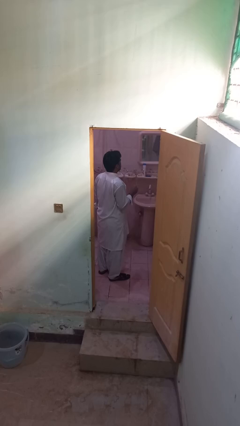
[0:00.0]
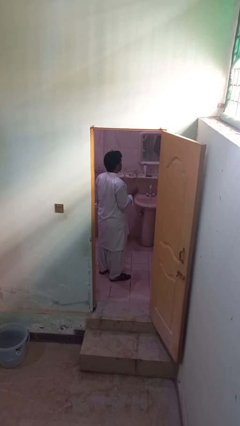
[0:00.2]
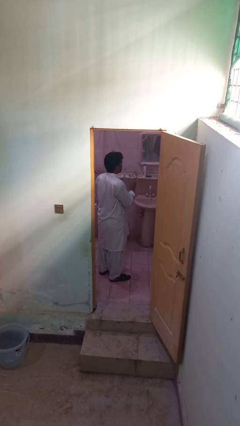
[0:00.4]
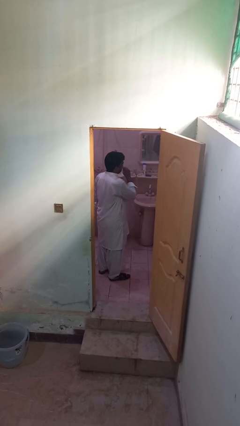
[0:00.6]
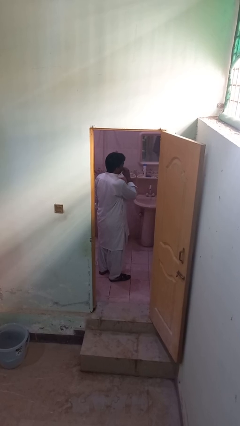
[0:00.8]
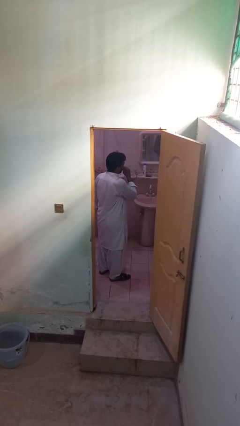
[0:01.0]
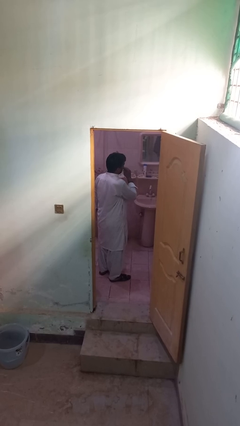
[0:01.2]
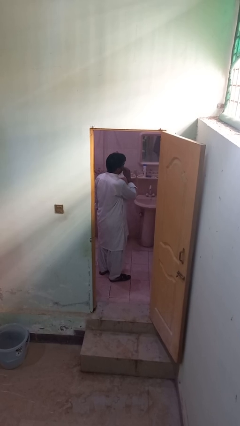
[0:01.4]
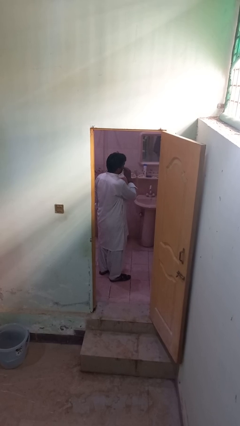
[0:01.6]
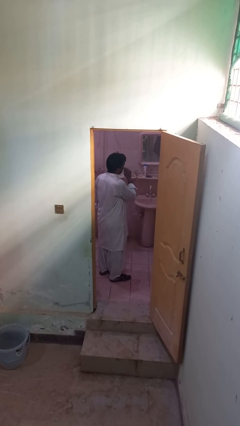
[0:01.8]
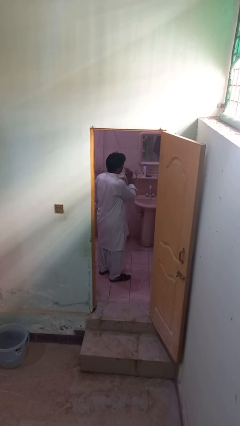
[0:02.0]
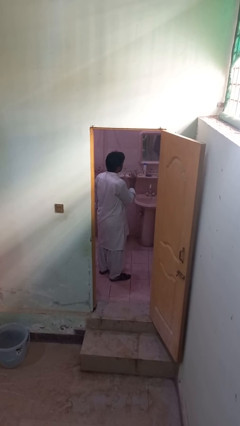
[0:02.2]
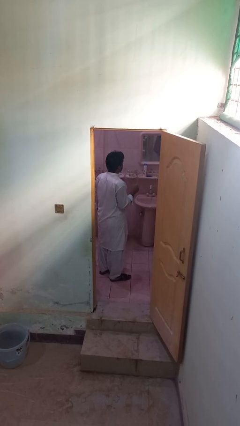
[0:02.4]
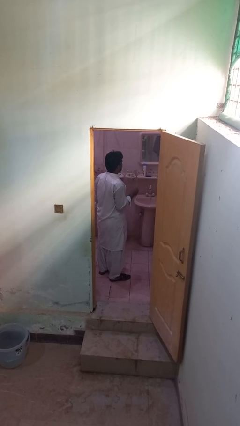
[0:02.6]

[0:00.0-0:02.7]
person flosses

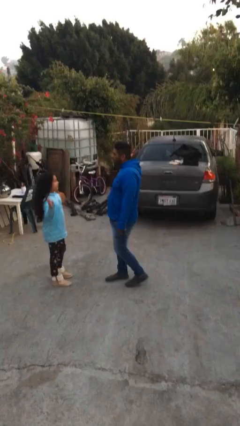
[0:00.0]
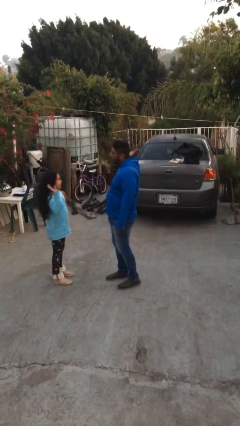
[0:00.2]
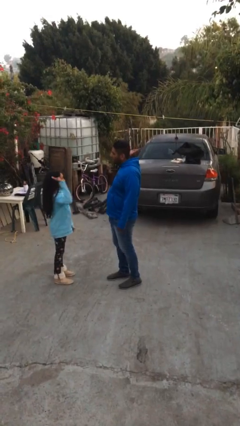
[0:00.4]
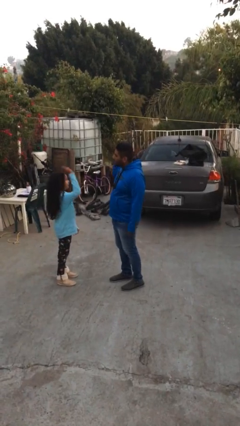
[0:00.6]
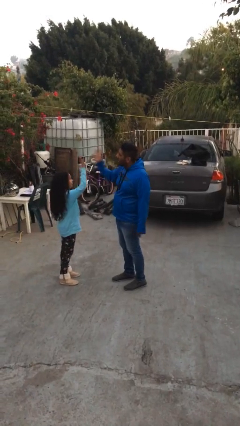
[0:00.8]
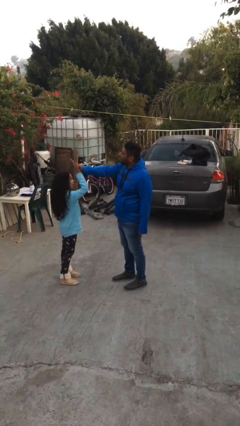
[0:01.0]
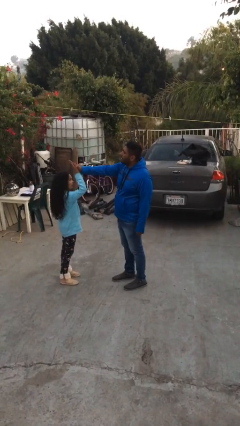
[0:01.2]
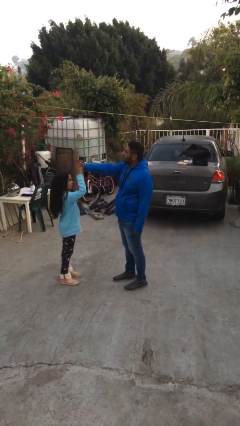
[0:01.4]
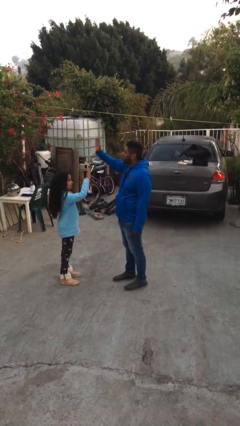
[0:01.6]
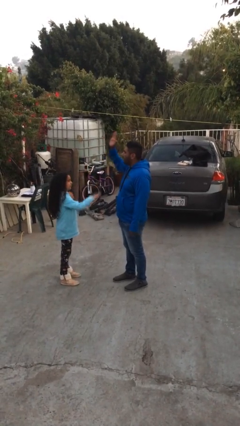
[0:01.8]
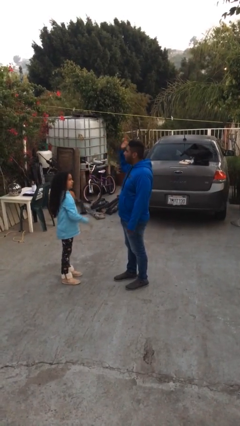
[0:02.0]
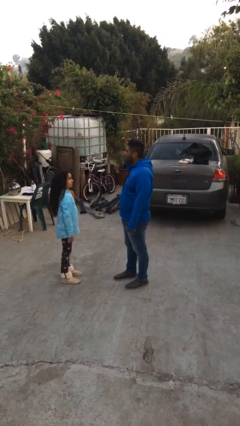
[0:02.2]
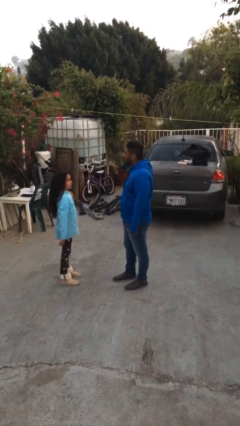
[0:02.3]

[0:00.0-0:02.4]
person highfives hand

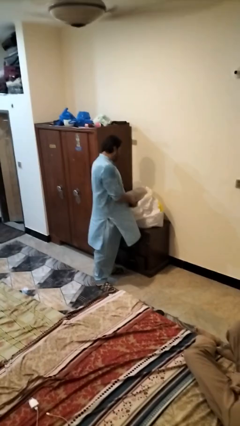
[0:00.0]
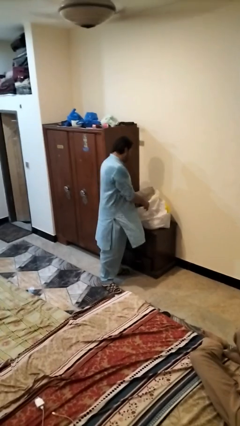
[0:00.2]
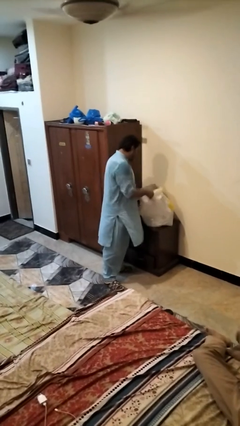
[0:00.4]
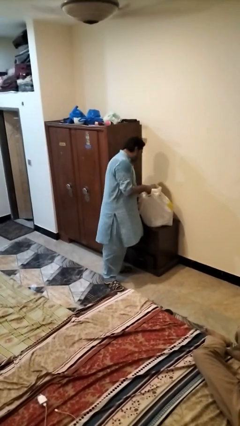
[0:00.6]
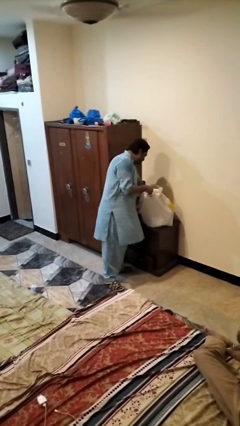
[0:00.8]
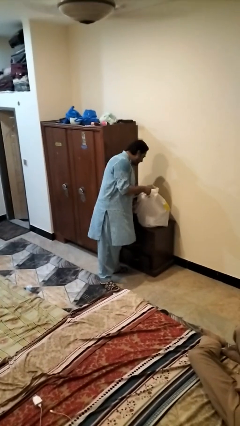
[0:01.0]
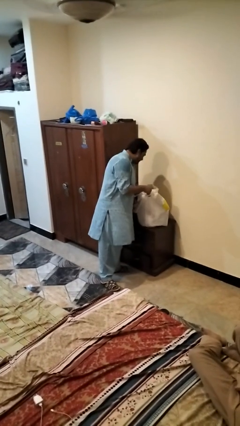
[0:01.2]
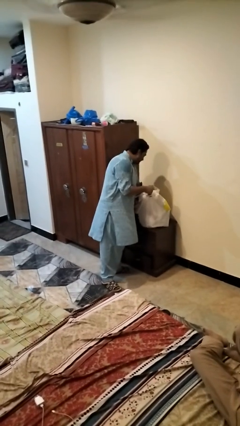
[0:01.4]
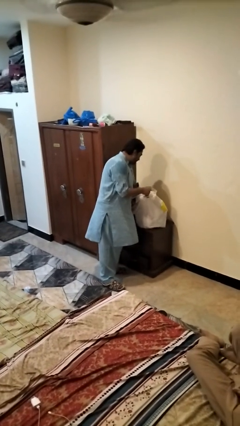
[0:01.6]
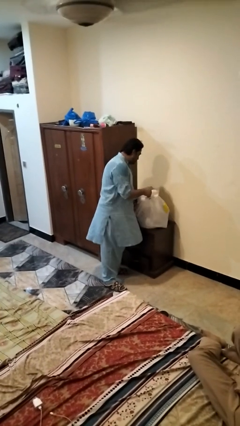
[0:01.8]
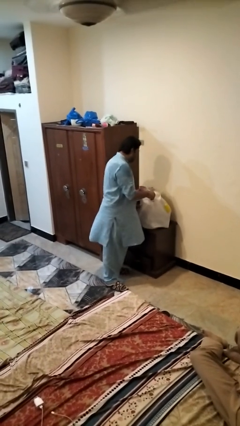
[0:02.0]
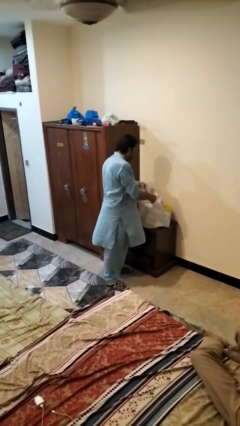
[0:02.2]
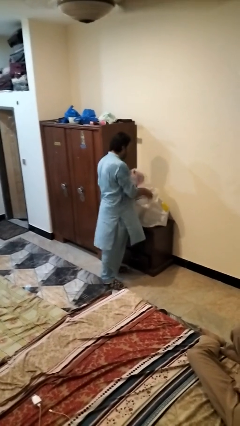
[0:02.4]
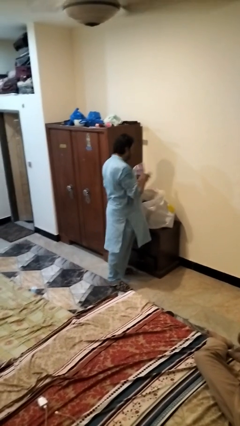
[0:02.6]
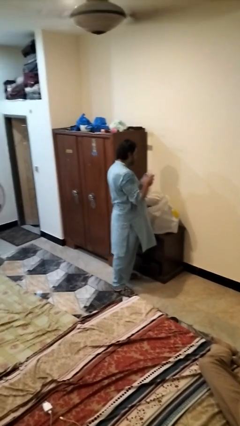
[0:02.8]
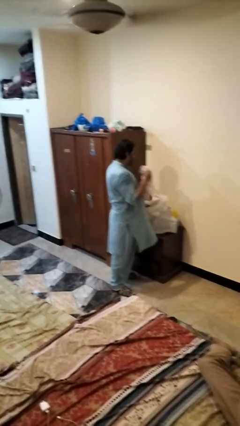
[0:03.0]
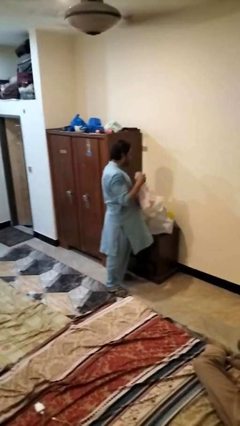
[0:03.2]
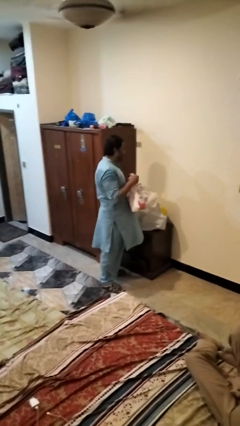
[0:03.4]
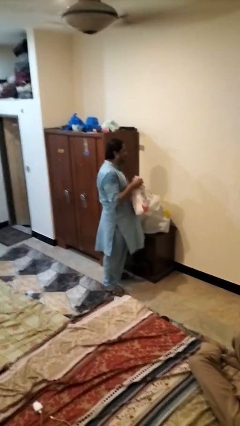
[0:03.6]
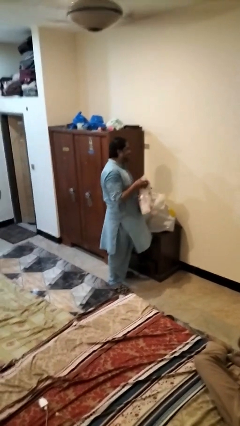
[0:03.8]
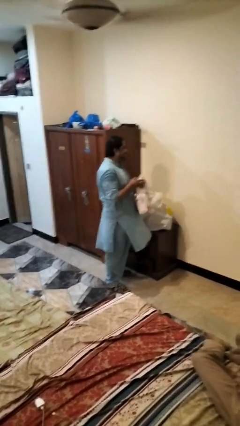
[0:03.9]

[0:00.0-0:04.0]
person takes object from bag

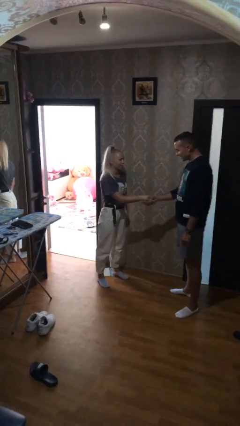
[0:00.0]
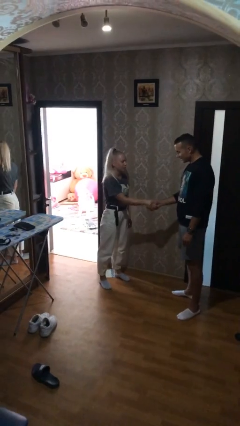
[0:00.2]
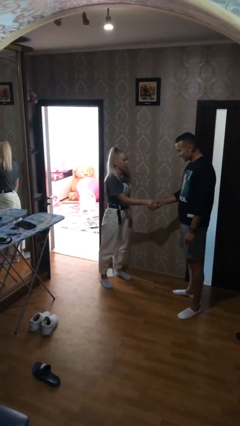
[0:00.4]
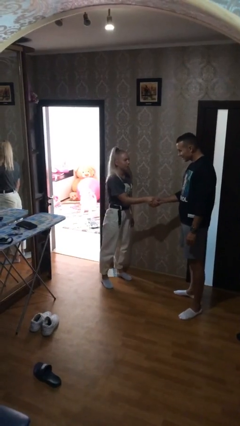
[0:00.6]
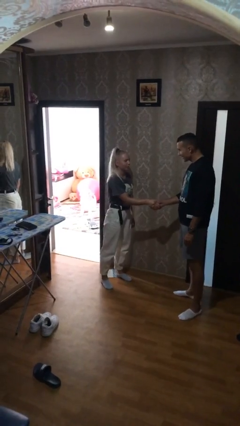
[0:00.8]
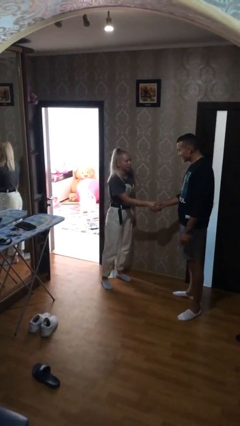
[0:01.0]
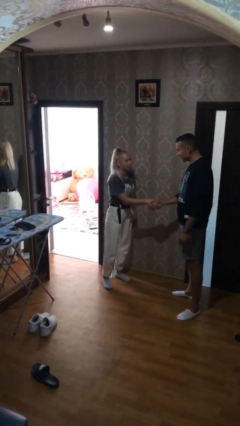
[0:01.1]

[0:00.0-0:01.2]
person shakes hand

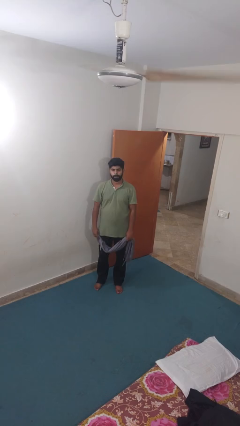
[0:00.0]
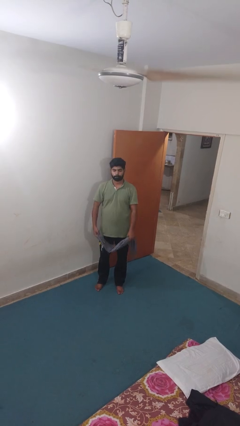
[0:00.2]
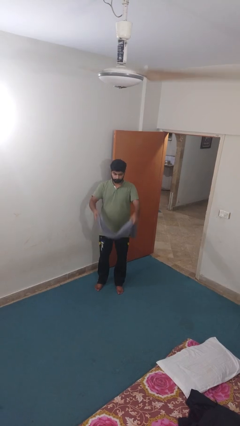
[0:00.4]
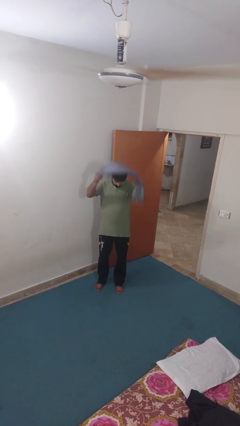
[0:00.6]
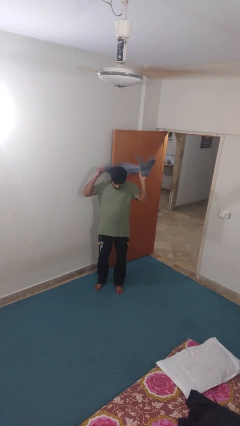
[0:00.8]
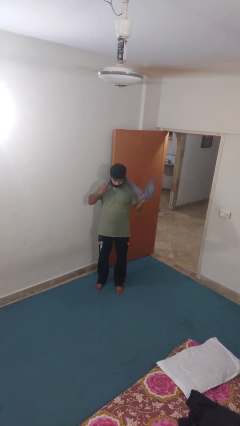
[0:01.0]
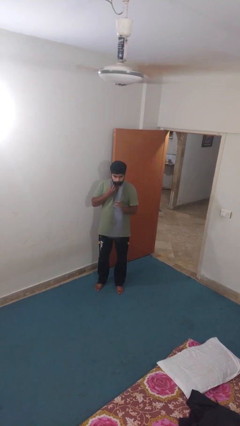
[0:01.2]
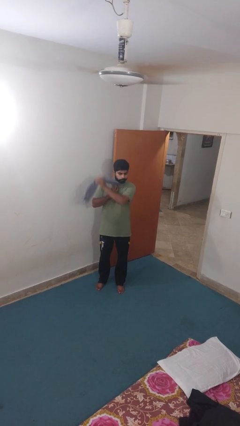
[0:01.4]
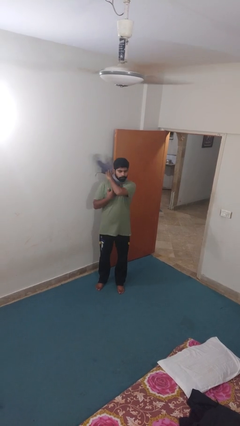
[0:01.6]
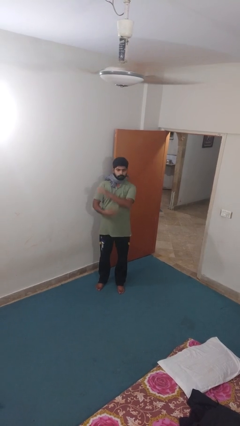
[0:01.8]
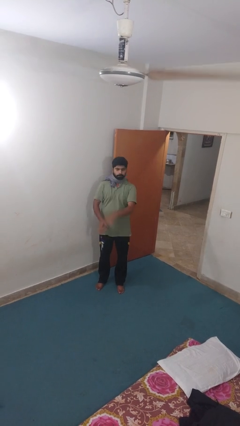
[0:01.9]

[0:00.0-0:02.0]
person puts on scarf

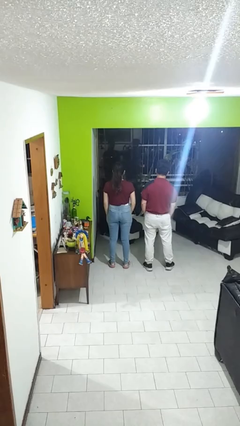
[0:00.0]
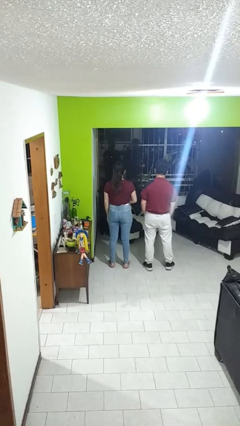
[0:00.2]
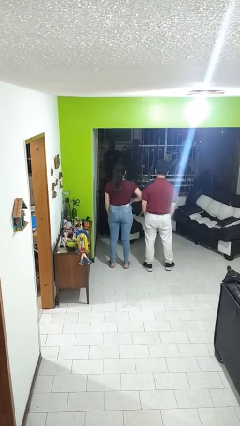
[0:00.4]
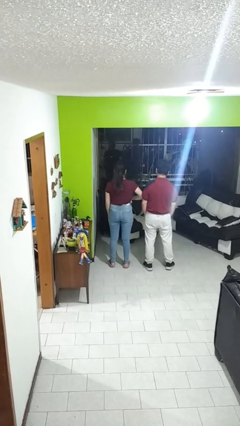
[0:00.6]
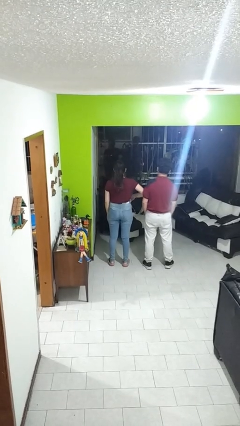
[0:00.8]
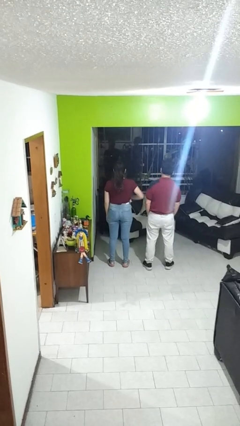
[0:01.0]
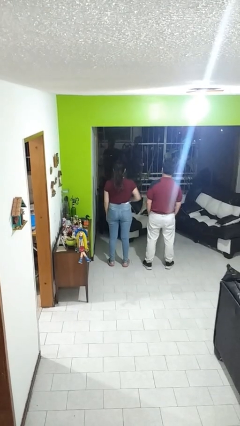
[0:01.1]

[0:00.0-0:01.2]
person nudges person with elbow

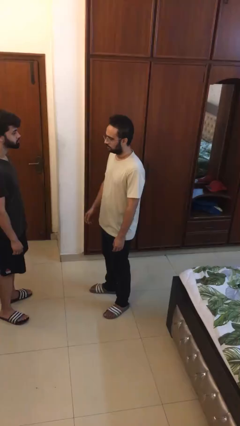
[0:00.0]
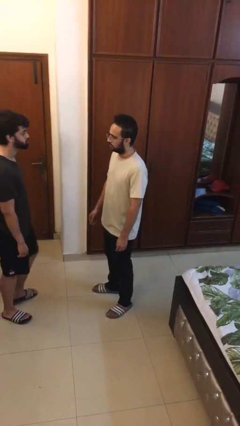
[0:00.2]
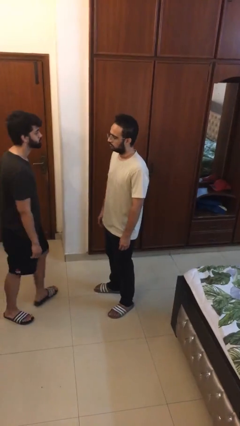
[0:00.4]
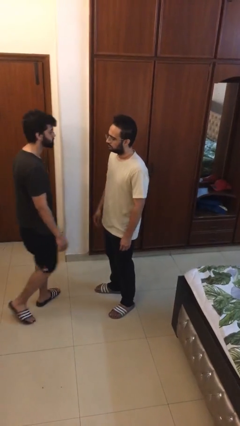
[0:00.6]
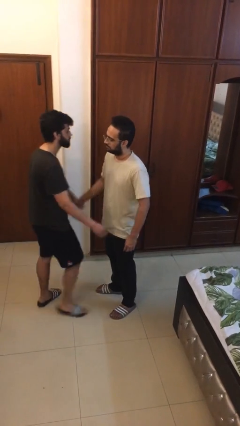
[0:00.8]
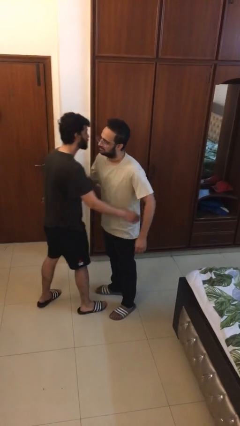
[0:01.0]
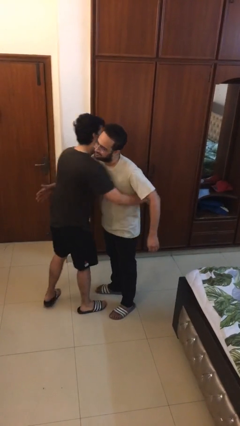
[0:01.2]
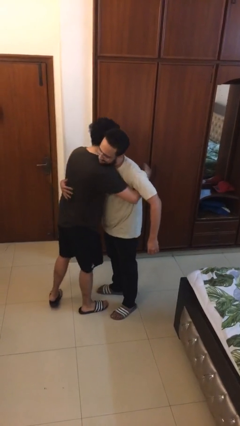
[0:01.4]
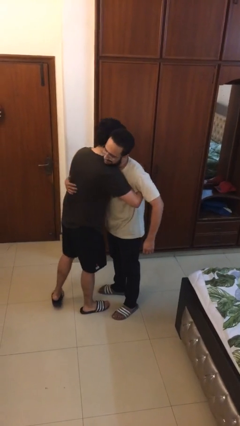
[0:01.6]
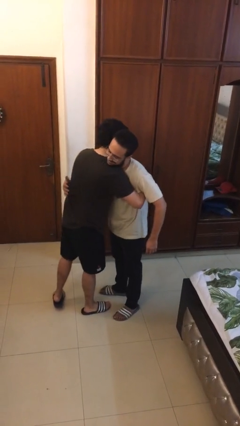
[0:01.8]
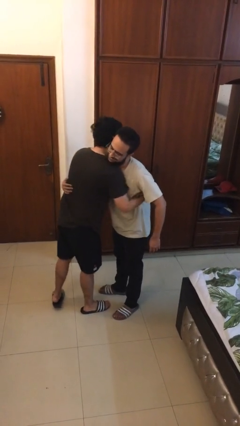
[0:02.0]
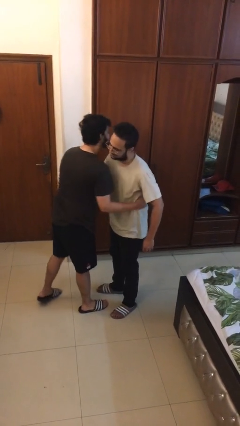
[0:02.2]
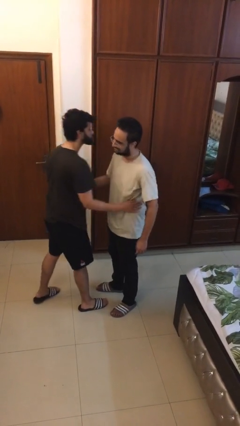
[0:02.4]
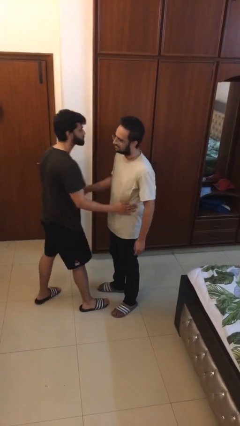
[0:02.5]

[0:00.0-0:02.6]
person embraces person

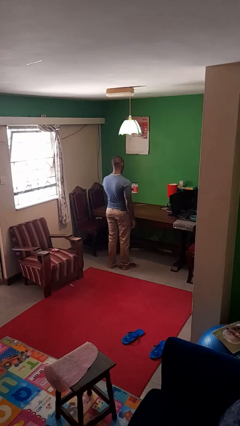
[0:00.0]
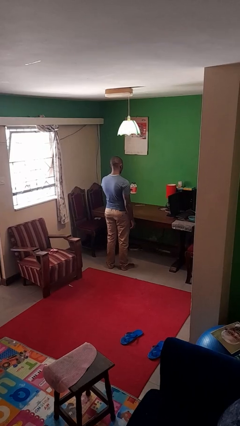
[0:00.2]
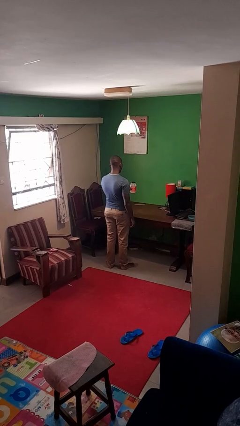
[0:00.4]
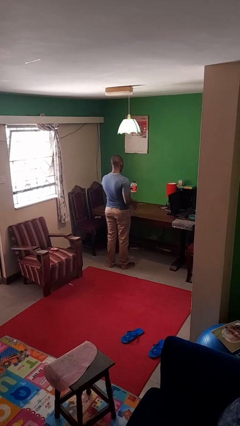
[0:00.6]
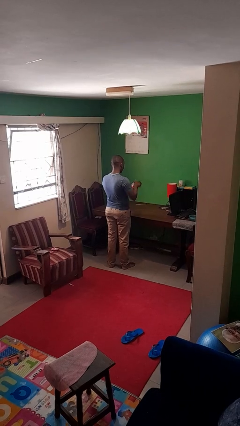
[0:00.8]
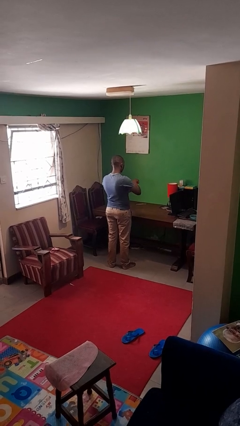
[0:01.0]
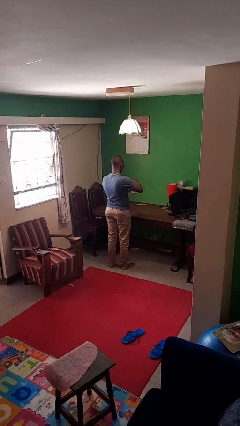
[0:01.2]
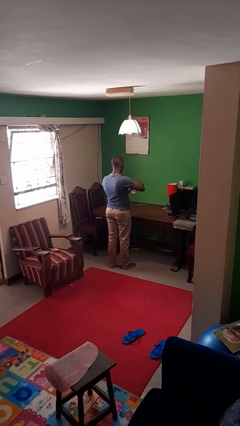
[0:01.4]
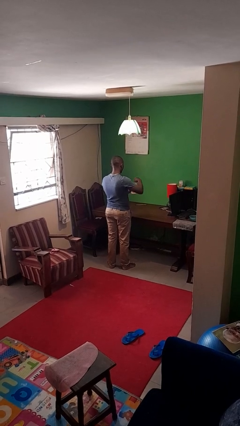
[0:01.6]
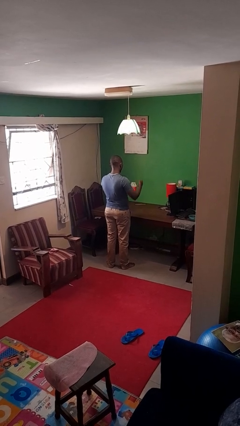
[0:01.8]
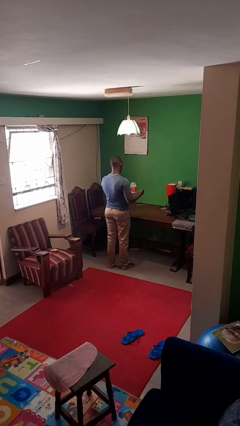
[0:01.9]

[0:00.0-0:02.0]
person opens jar